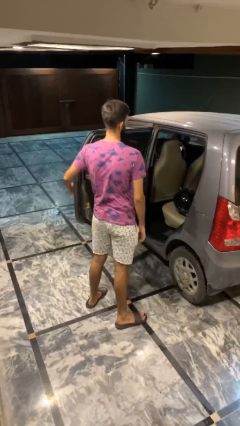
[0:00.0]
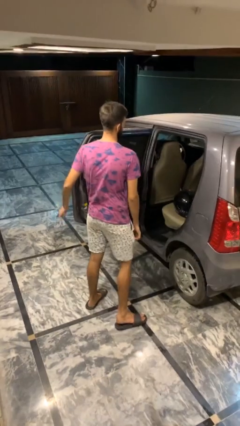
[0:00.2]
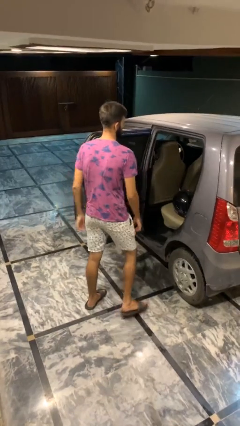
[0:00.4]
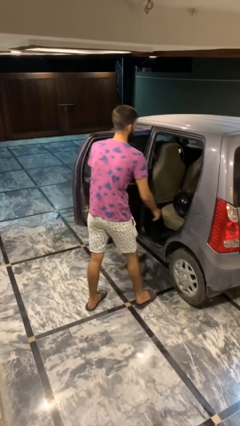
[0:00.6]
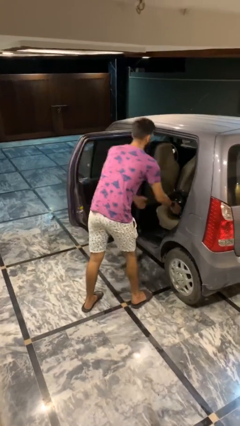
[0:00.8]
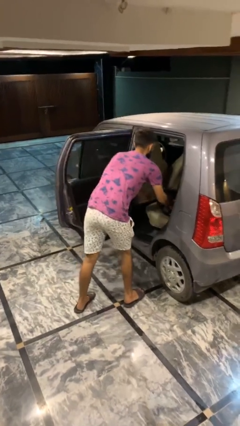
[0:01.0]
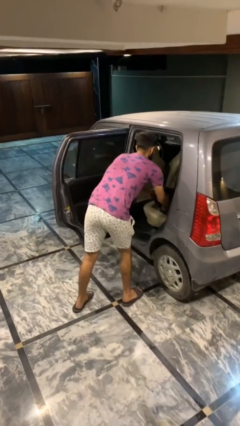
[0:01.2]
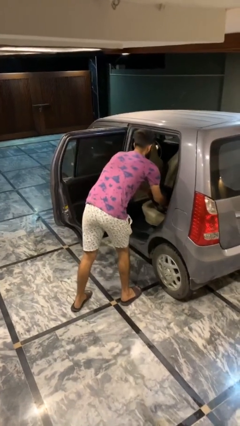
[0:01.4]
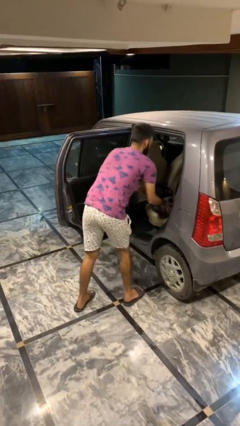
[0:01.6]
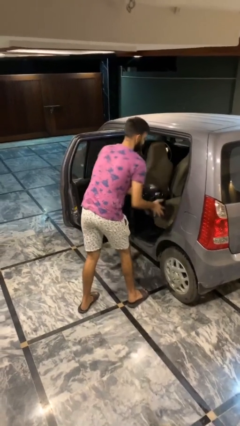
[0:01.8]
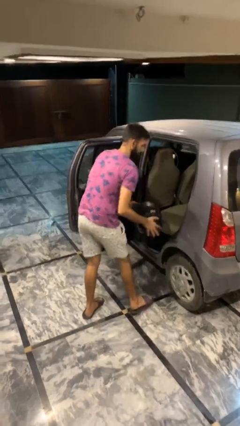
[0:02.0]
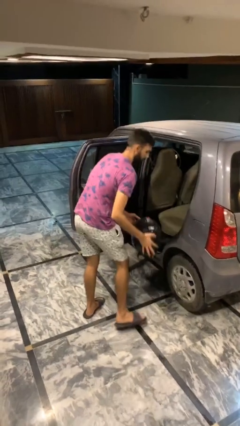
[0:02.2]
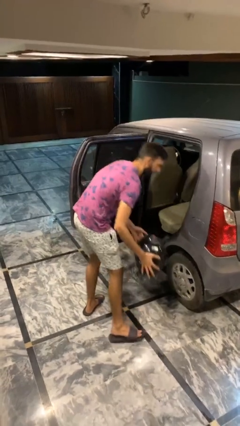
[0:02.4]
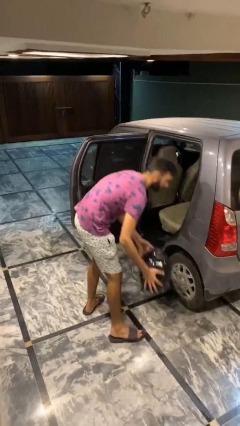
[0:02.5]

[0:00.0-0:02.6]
person unloads car

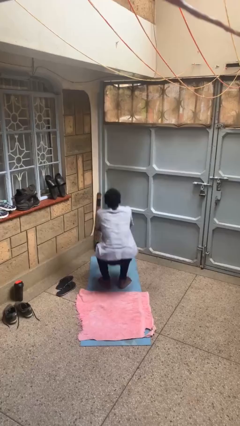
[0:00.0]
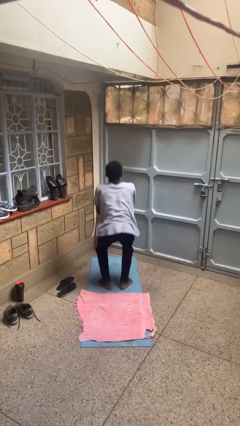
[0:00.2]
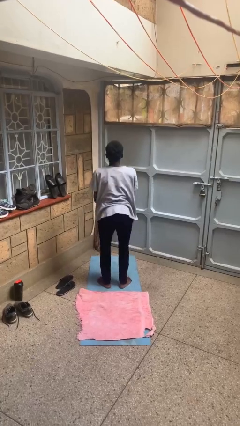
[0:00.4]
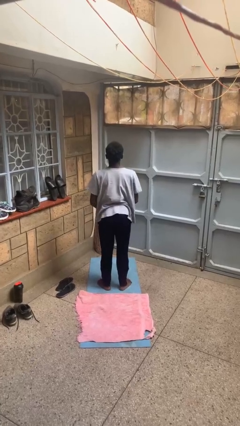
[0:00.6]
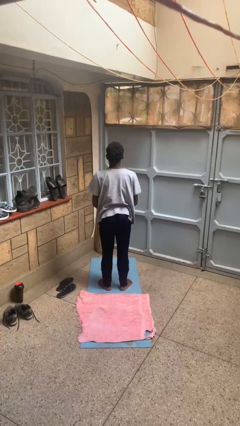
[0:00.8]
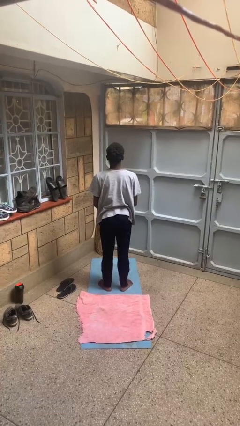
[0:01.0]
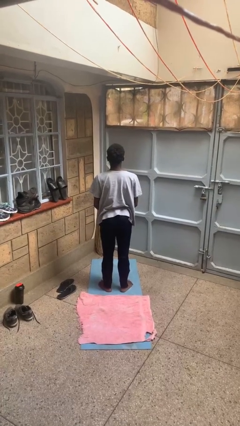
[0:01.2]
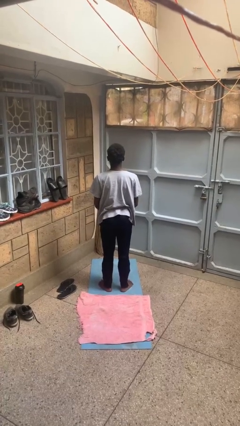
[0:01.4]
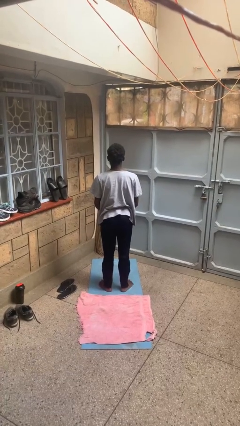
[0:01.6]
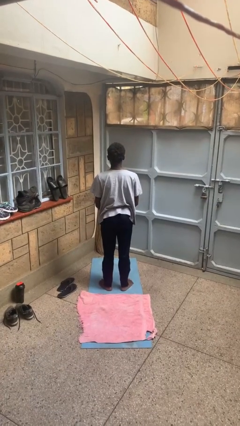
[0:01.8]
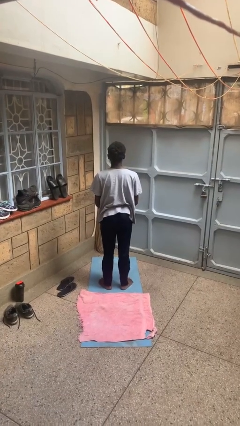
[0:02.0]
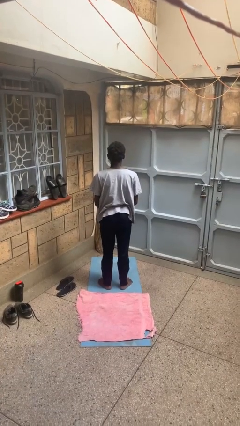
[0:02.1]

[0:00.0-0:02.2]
person stands up

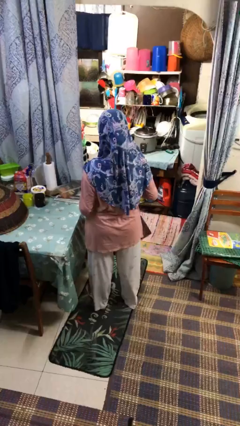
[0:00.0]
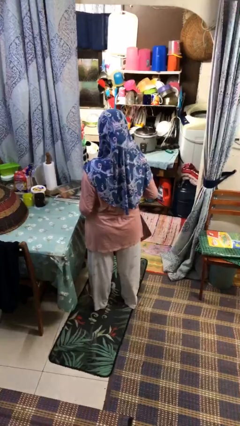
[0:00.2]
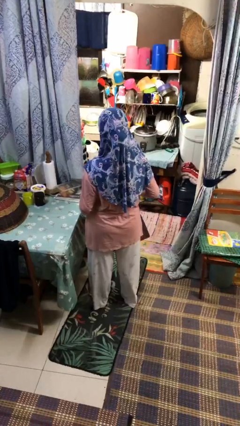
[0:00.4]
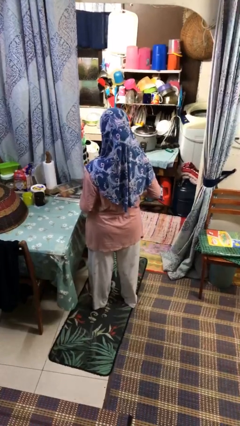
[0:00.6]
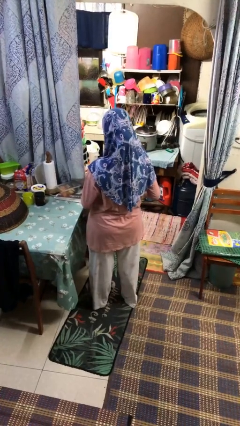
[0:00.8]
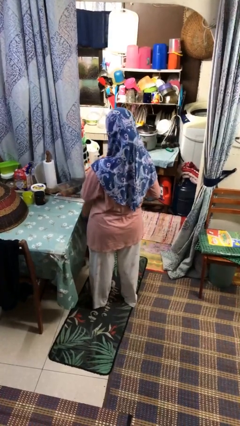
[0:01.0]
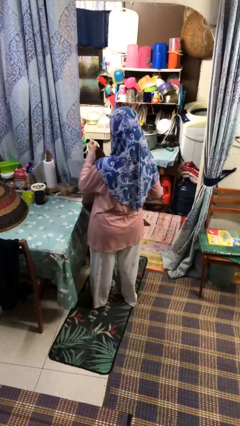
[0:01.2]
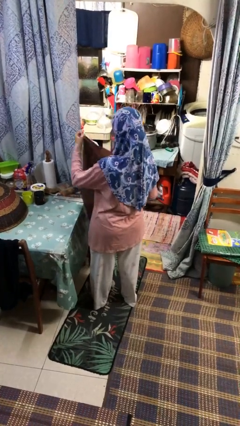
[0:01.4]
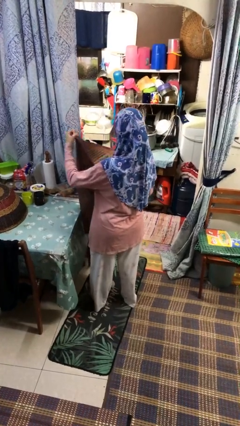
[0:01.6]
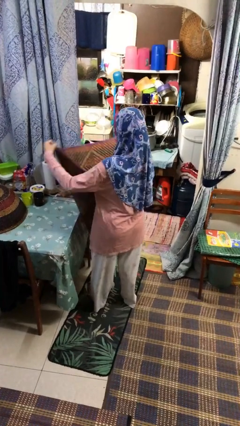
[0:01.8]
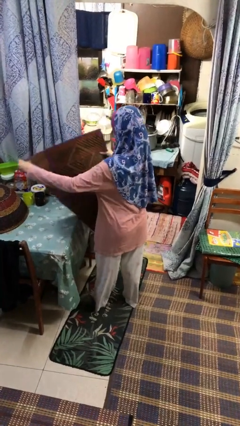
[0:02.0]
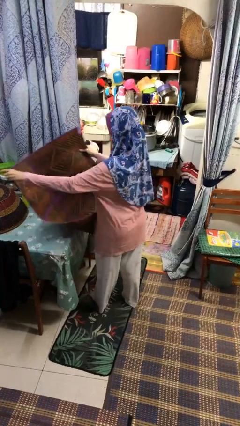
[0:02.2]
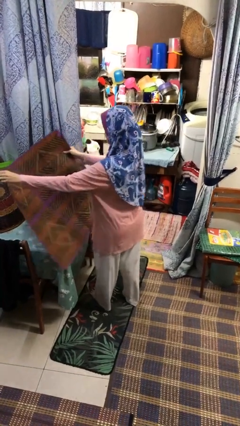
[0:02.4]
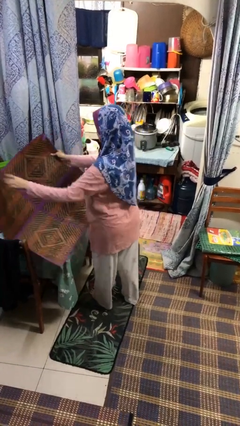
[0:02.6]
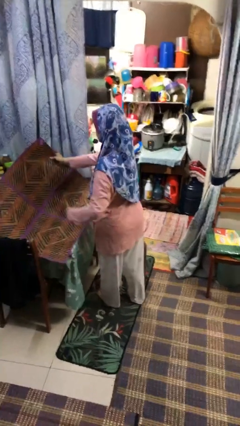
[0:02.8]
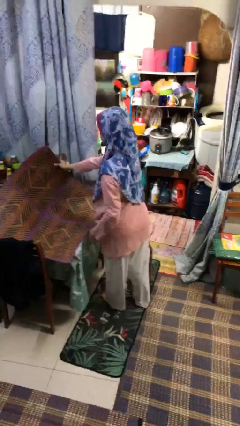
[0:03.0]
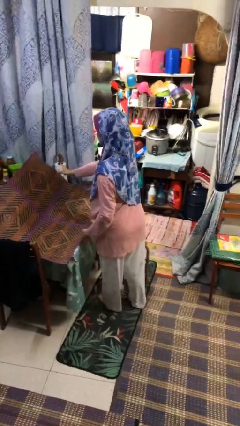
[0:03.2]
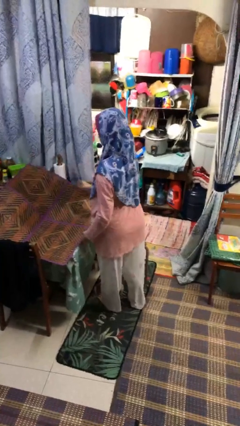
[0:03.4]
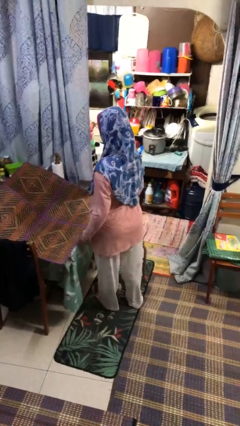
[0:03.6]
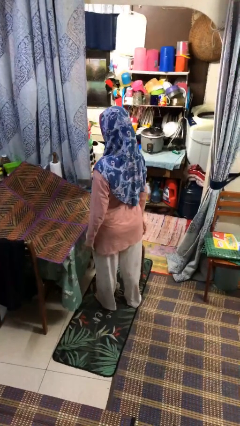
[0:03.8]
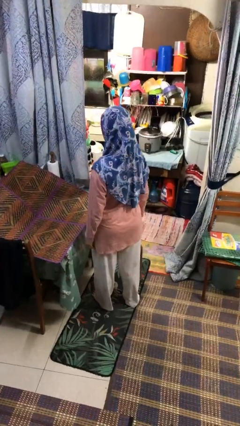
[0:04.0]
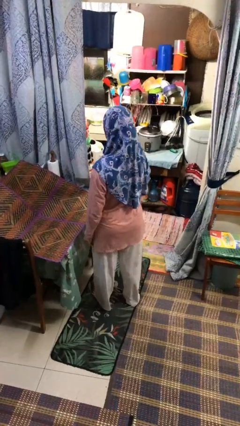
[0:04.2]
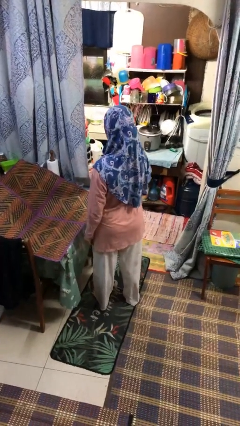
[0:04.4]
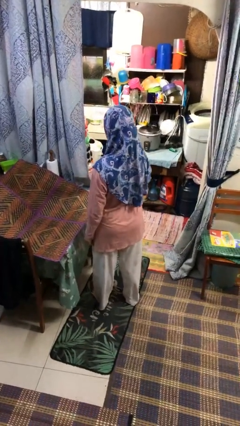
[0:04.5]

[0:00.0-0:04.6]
person spreads tablecloth

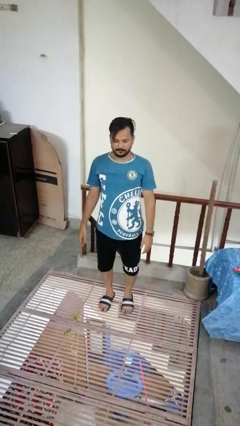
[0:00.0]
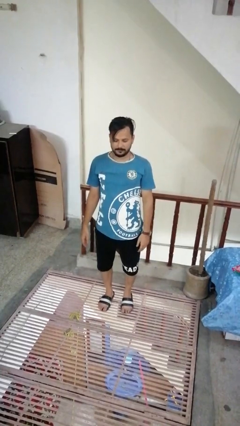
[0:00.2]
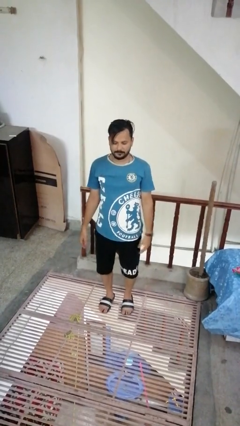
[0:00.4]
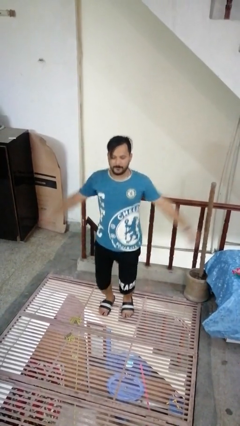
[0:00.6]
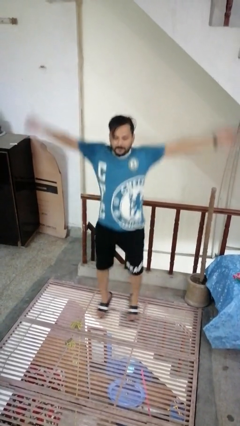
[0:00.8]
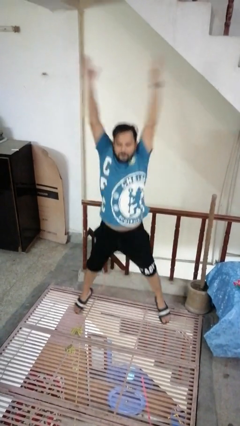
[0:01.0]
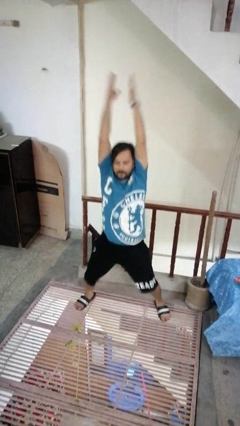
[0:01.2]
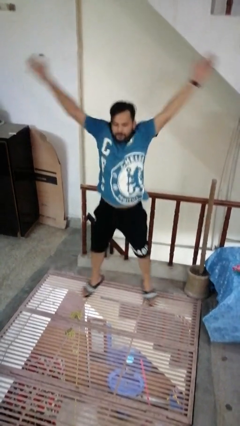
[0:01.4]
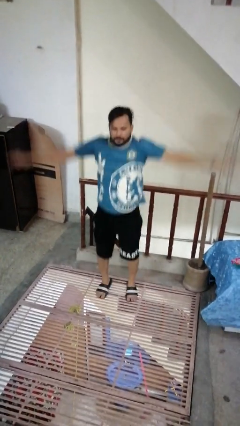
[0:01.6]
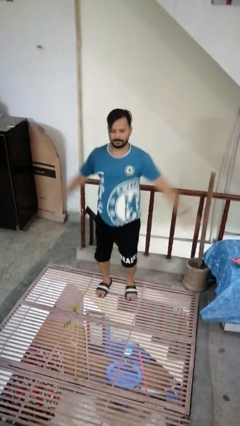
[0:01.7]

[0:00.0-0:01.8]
person exercises with jumping jacks

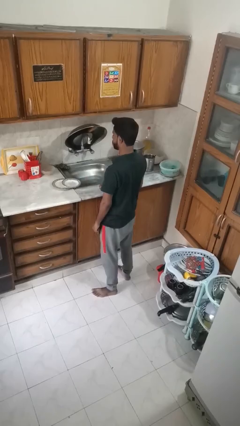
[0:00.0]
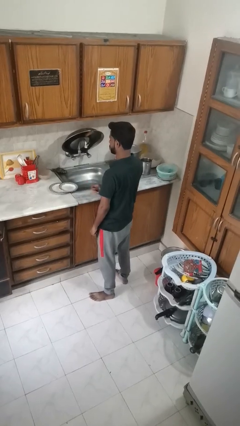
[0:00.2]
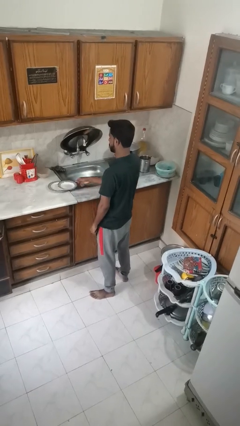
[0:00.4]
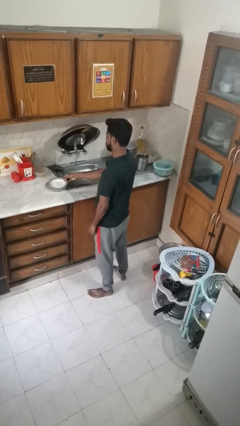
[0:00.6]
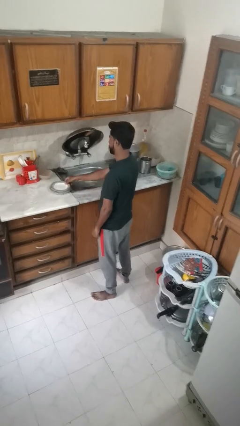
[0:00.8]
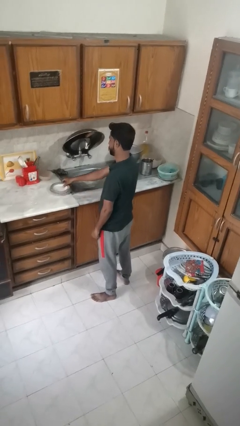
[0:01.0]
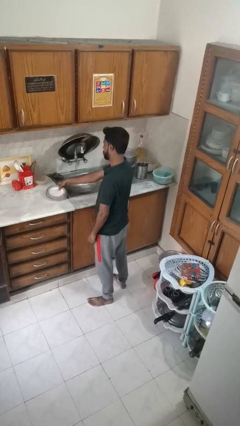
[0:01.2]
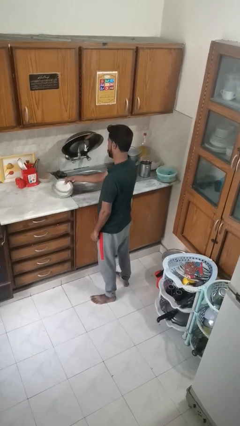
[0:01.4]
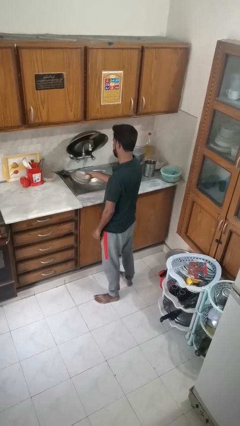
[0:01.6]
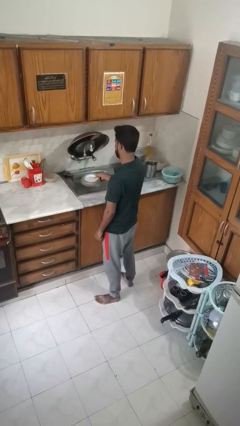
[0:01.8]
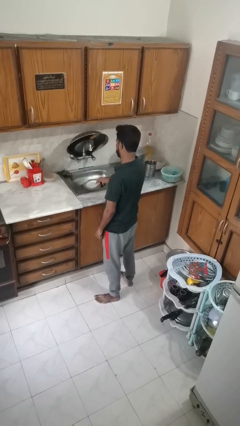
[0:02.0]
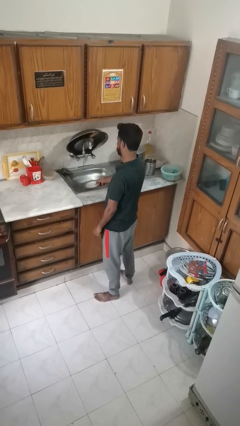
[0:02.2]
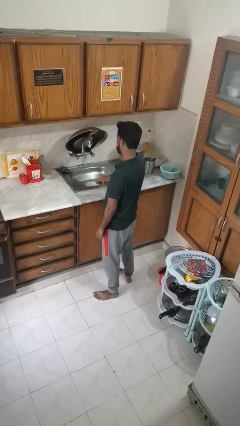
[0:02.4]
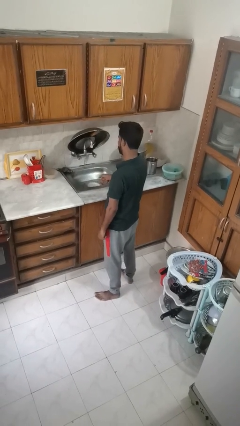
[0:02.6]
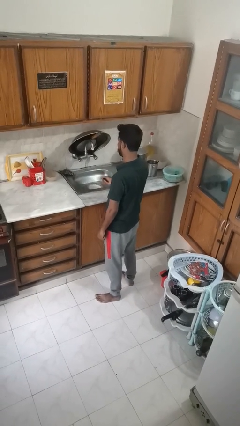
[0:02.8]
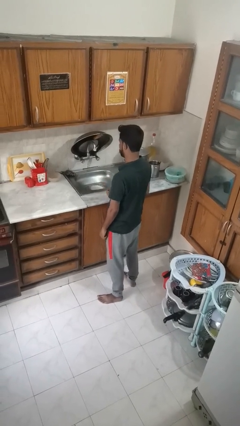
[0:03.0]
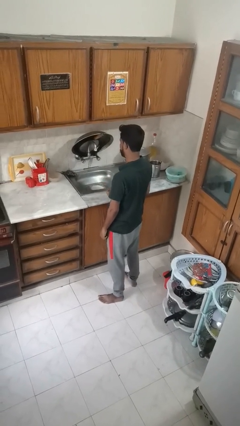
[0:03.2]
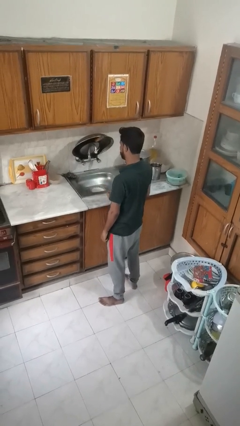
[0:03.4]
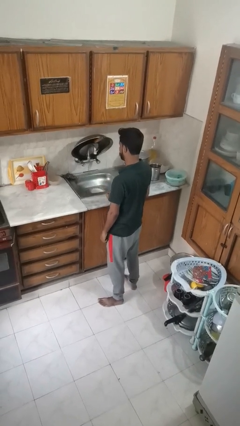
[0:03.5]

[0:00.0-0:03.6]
person opens dishwasher

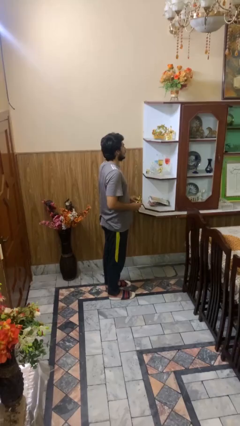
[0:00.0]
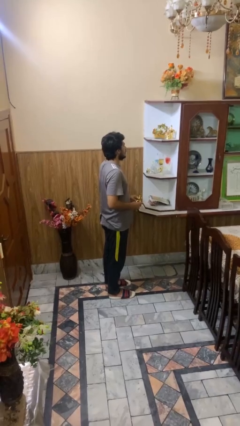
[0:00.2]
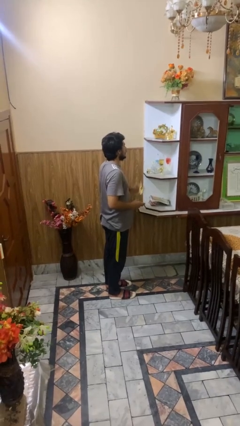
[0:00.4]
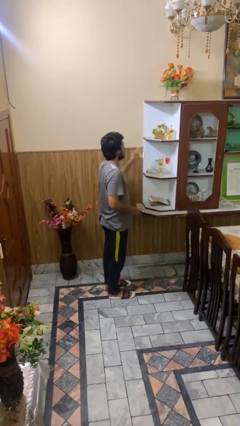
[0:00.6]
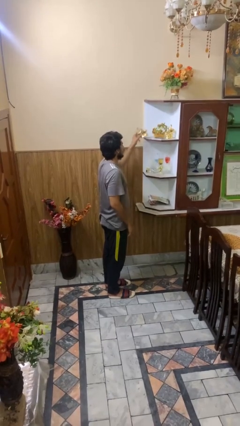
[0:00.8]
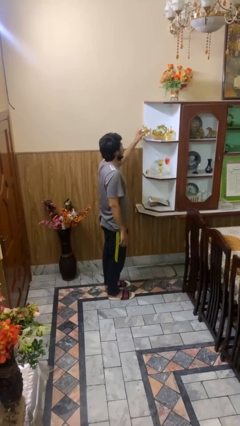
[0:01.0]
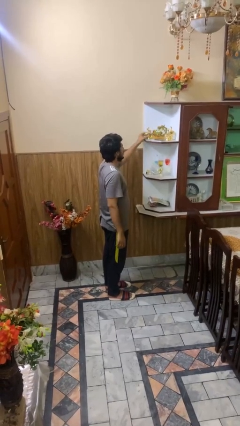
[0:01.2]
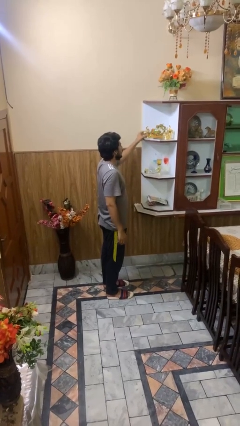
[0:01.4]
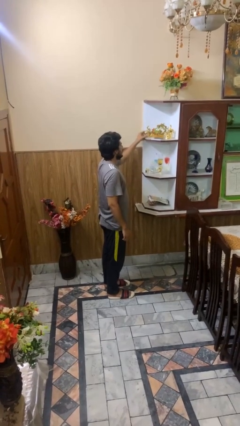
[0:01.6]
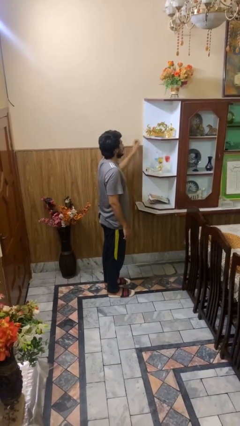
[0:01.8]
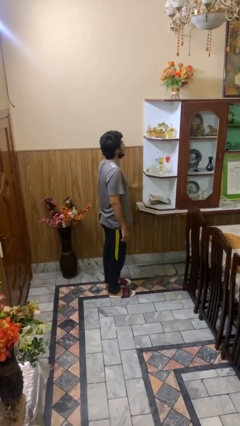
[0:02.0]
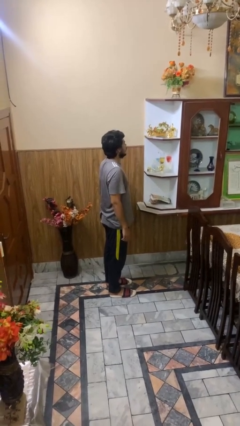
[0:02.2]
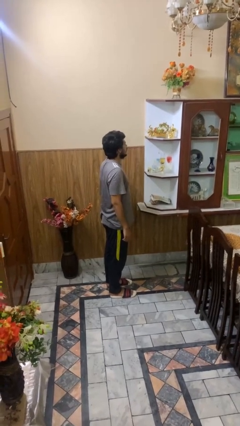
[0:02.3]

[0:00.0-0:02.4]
person puts down object on shelf
